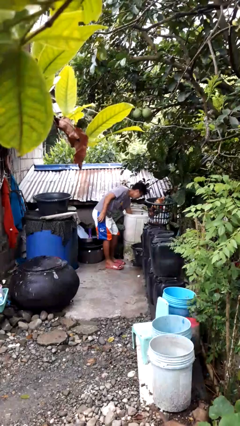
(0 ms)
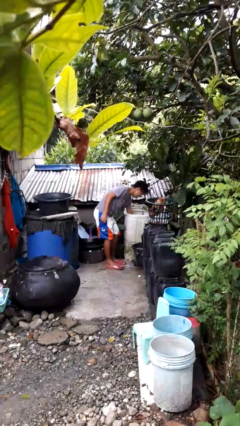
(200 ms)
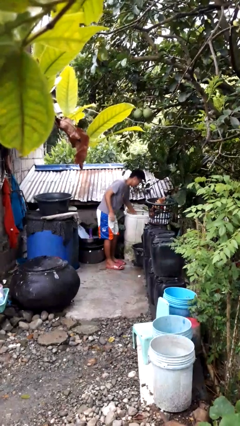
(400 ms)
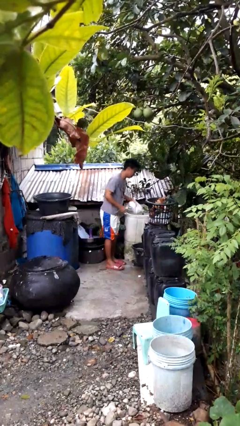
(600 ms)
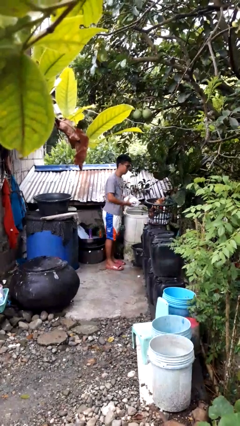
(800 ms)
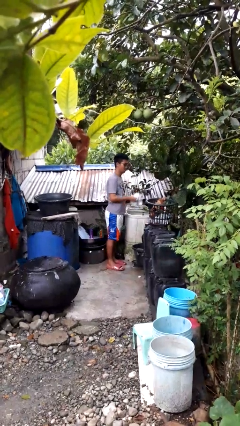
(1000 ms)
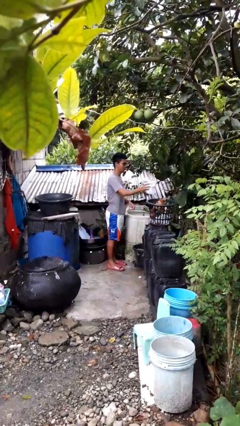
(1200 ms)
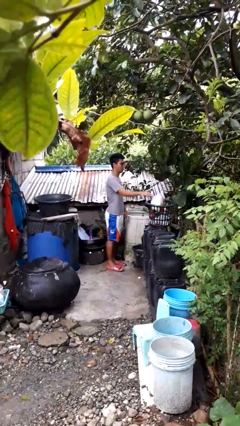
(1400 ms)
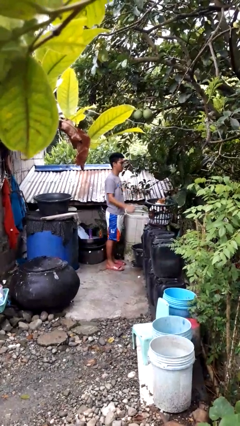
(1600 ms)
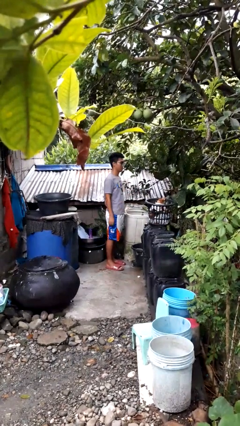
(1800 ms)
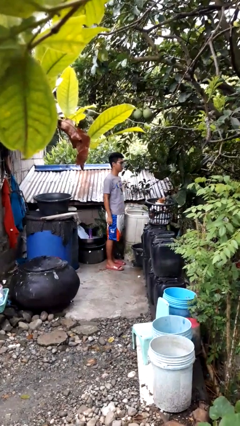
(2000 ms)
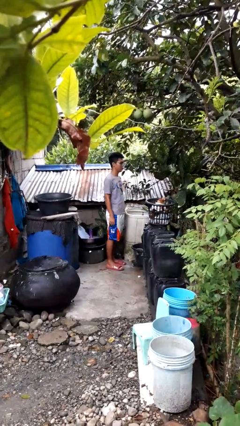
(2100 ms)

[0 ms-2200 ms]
person loads clotheswasher

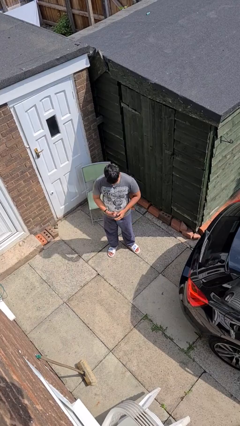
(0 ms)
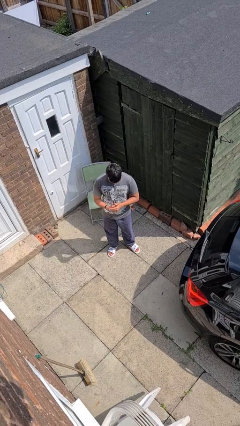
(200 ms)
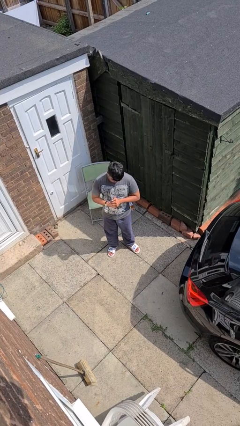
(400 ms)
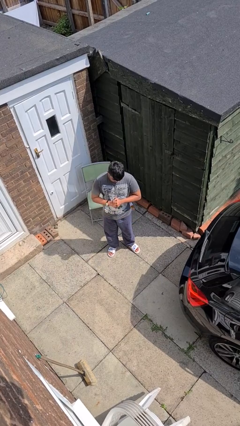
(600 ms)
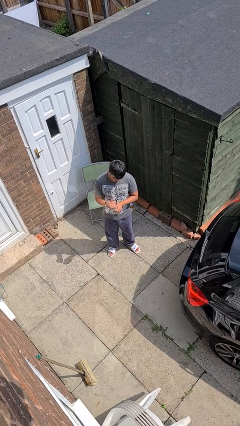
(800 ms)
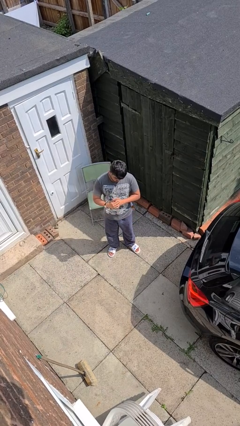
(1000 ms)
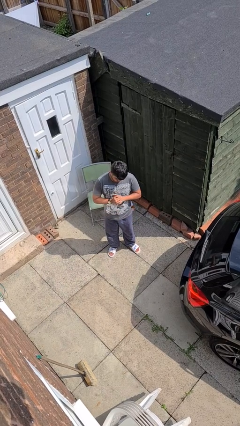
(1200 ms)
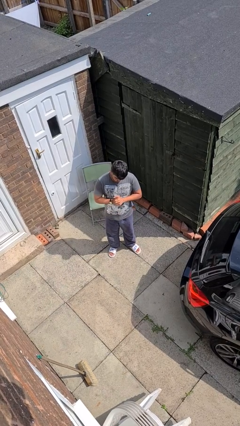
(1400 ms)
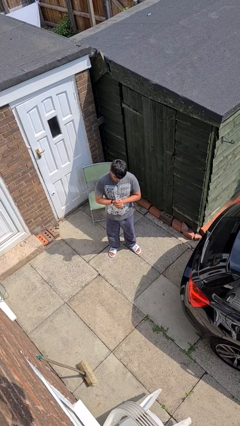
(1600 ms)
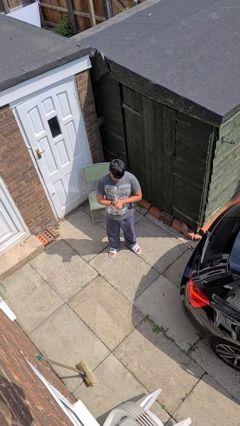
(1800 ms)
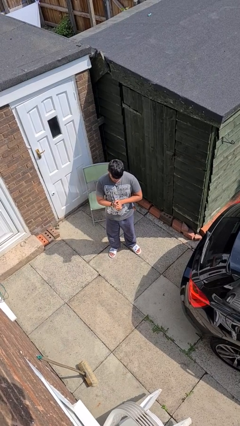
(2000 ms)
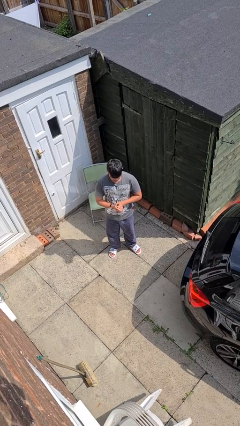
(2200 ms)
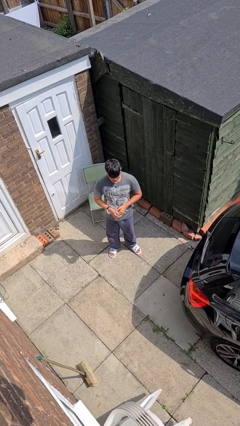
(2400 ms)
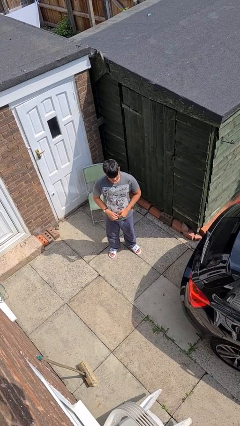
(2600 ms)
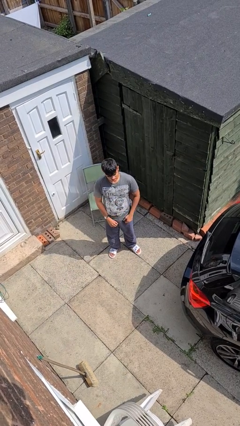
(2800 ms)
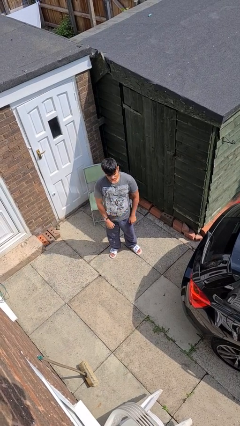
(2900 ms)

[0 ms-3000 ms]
person cracks knuckles

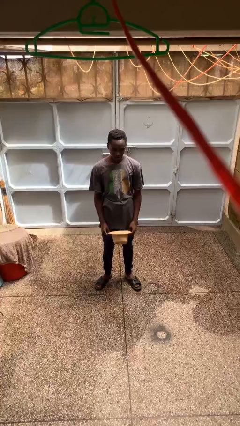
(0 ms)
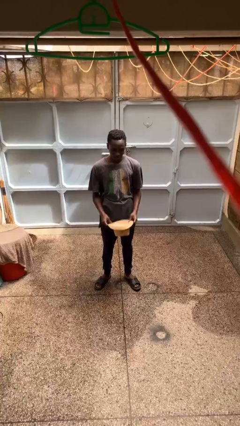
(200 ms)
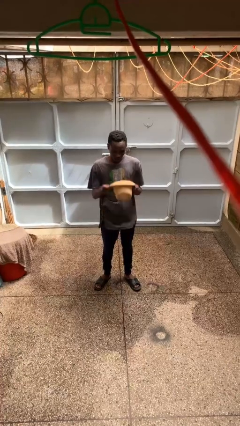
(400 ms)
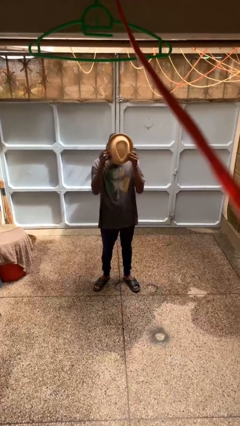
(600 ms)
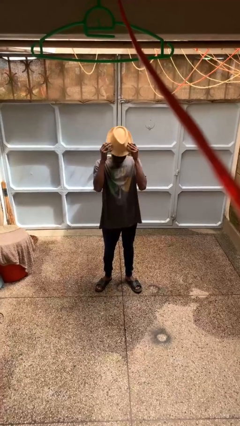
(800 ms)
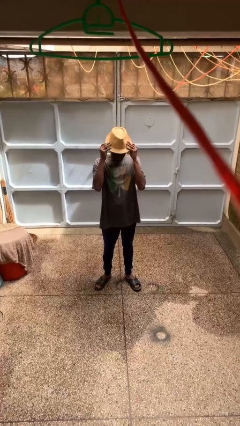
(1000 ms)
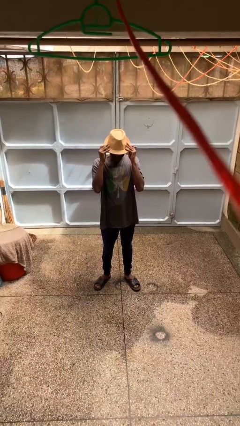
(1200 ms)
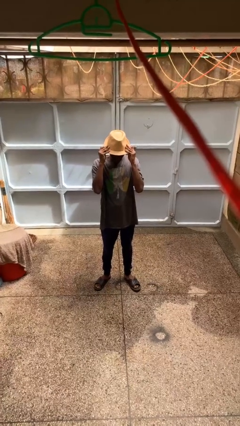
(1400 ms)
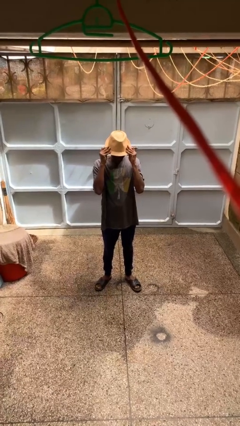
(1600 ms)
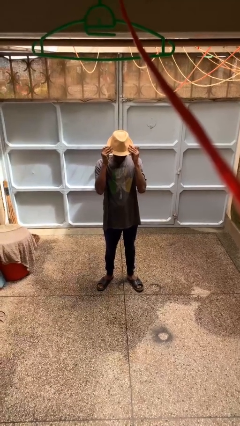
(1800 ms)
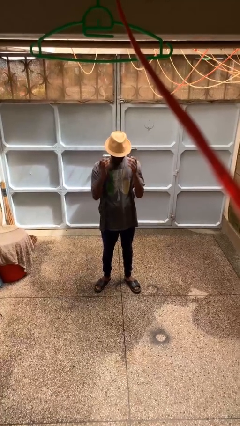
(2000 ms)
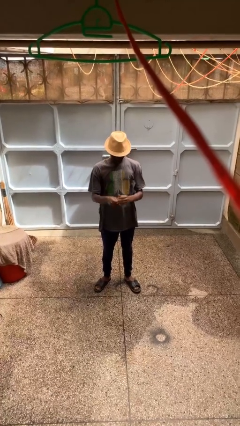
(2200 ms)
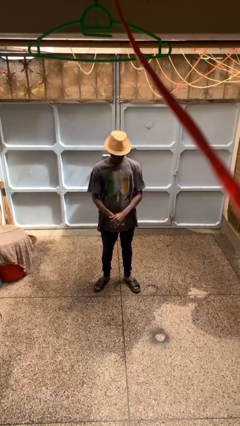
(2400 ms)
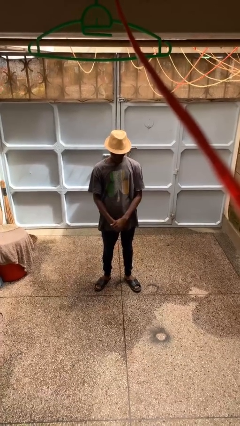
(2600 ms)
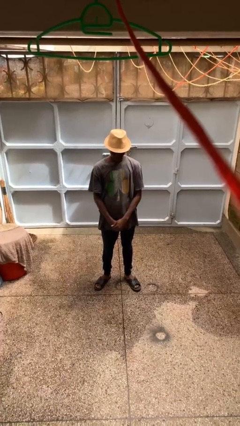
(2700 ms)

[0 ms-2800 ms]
person puts on hat

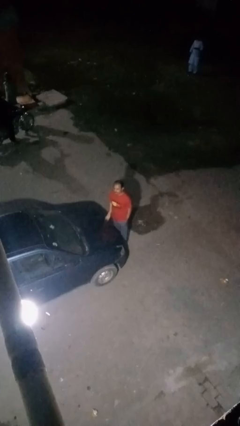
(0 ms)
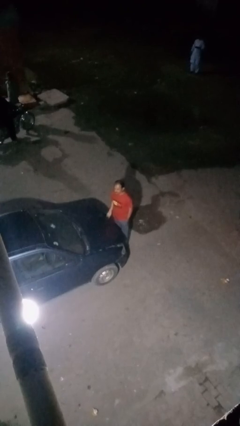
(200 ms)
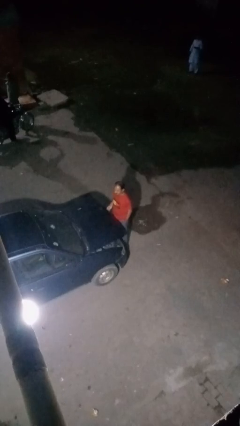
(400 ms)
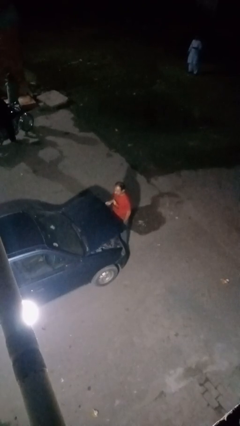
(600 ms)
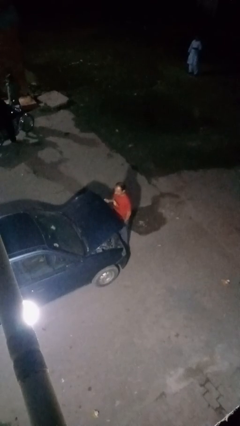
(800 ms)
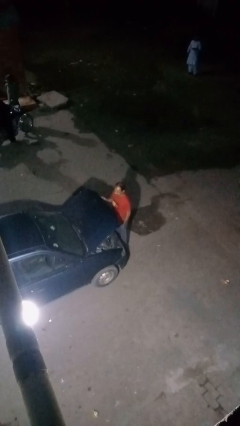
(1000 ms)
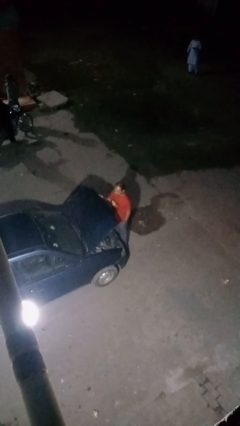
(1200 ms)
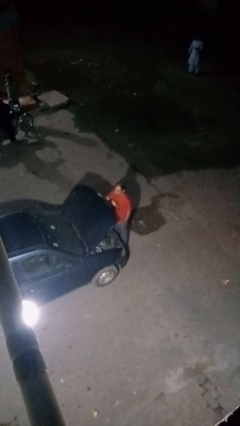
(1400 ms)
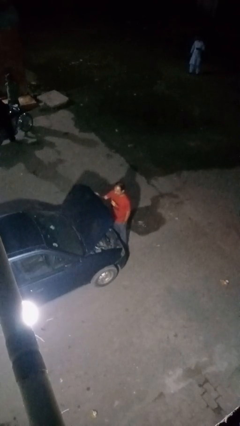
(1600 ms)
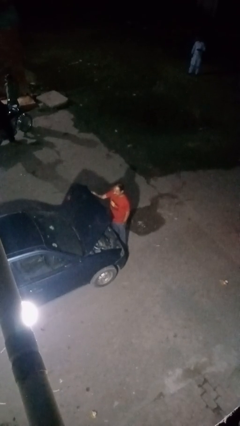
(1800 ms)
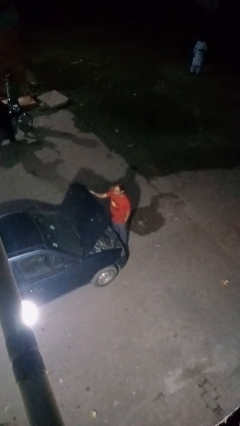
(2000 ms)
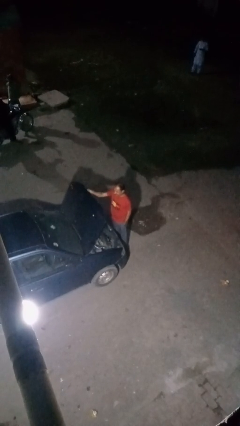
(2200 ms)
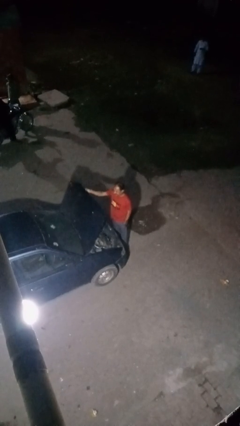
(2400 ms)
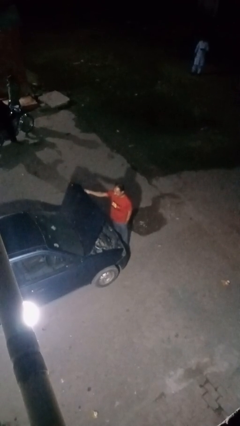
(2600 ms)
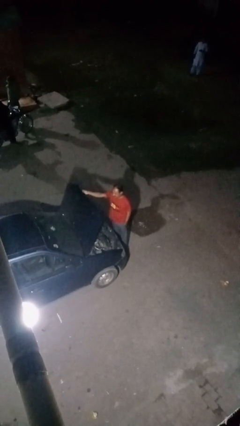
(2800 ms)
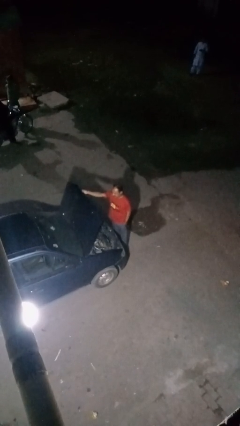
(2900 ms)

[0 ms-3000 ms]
person opens car hood

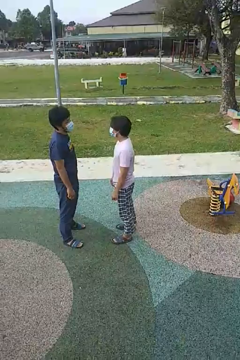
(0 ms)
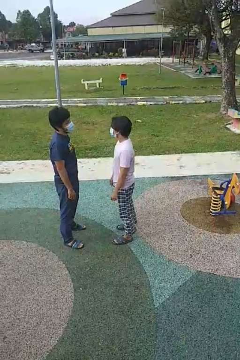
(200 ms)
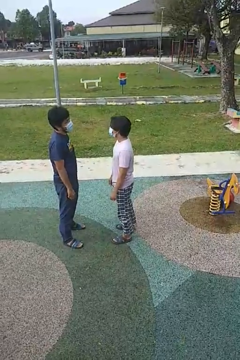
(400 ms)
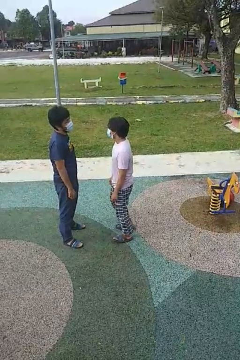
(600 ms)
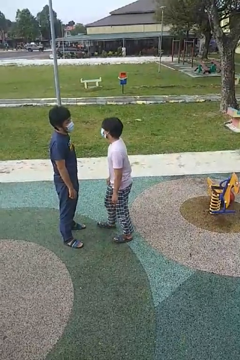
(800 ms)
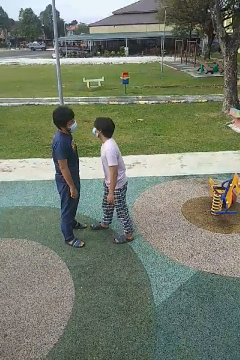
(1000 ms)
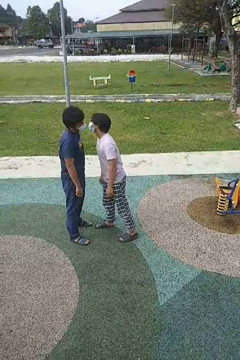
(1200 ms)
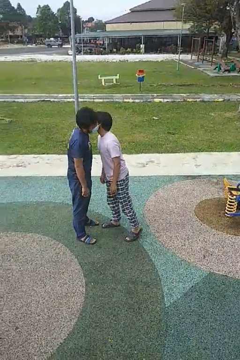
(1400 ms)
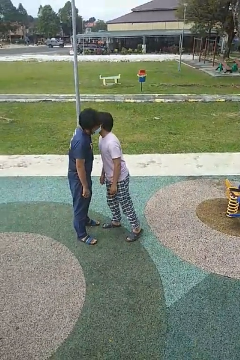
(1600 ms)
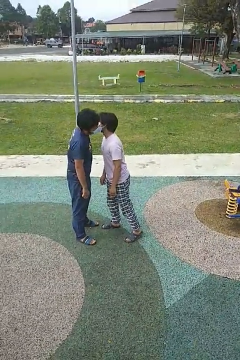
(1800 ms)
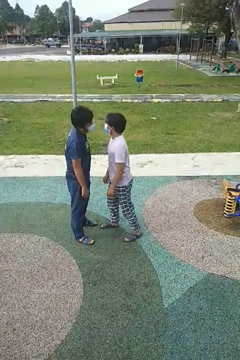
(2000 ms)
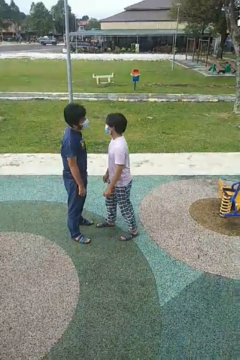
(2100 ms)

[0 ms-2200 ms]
person kisses cheek of person

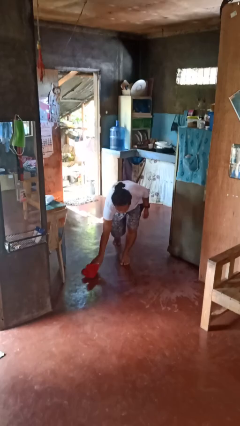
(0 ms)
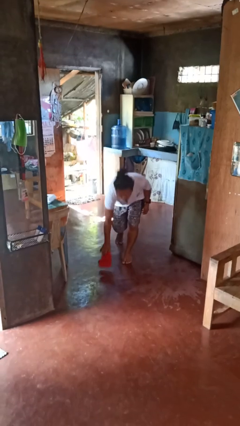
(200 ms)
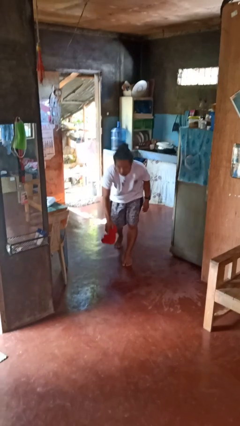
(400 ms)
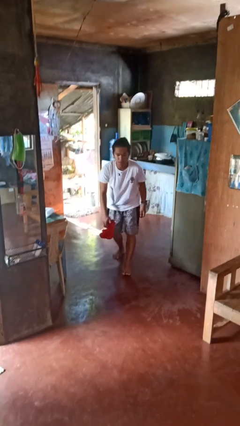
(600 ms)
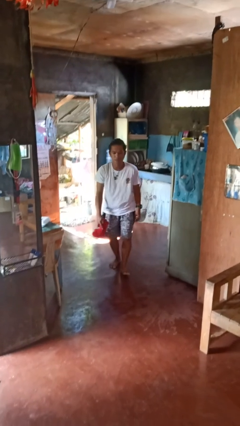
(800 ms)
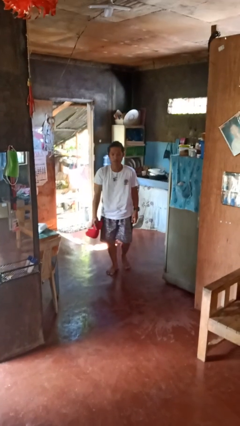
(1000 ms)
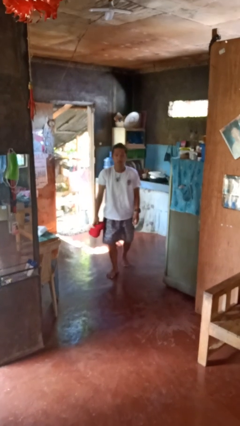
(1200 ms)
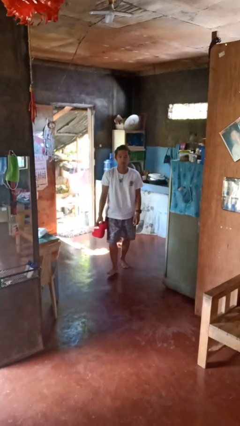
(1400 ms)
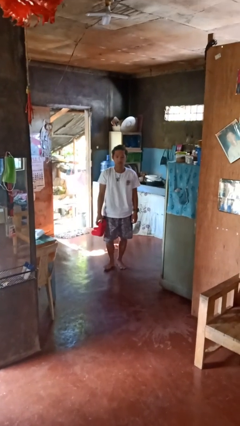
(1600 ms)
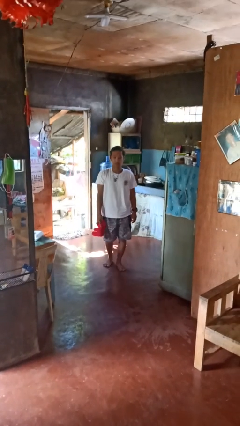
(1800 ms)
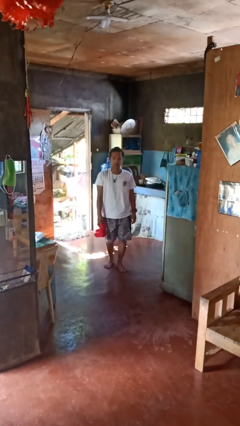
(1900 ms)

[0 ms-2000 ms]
person picks up object from floor

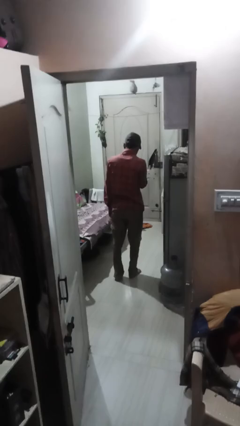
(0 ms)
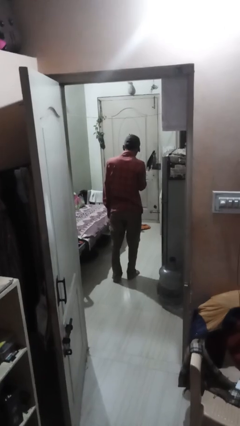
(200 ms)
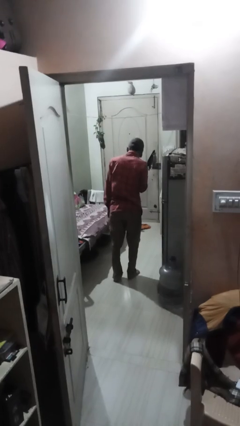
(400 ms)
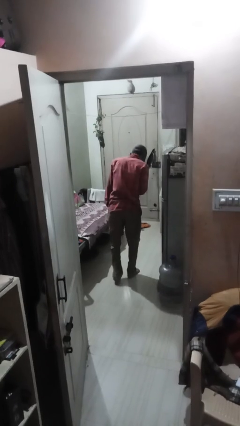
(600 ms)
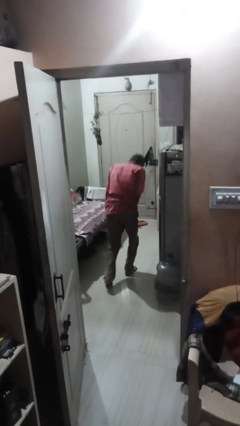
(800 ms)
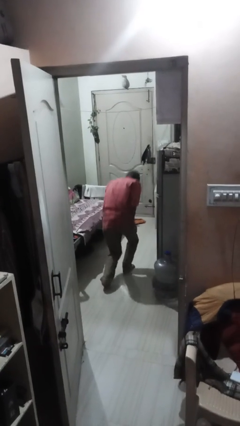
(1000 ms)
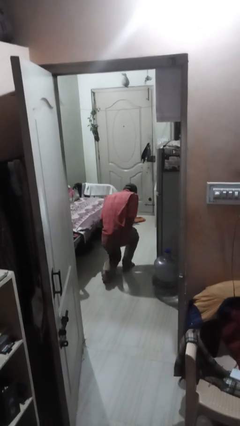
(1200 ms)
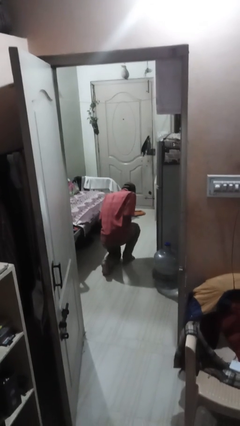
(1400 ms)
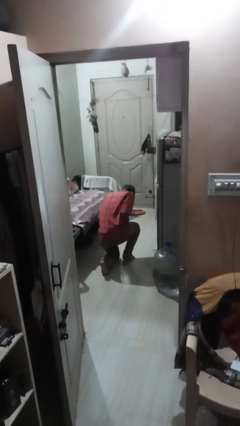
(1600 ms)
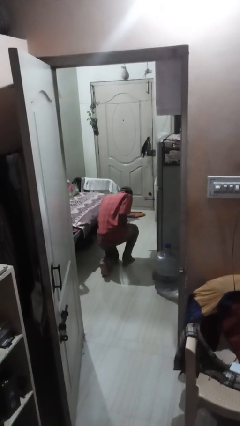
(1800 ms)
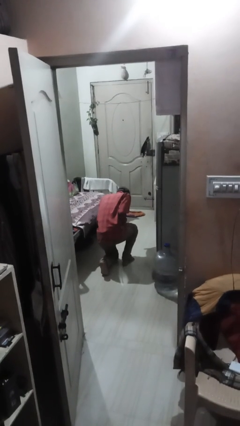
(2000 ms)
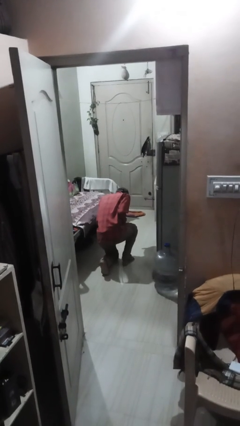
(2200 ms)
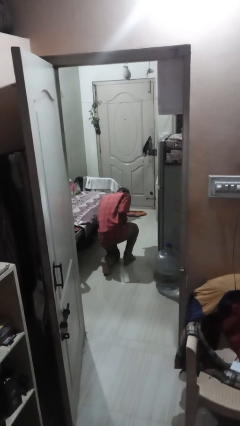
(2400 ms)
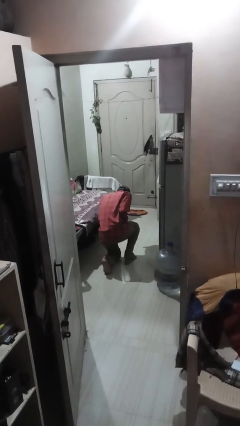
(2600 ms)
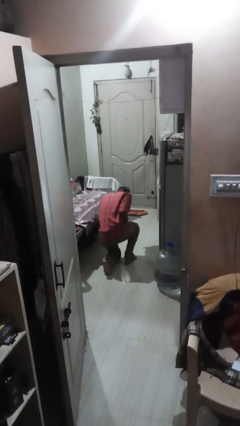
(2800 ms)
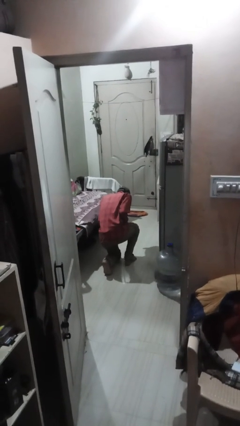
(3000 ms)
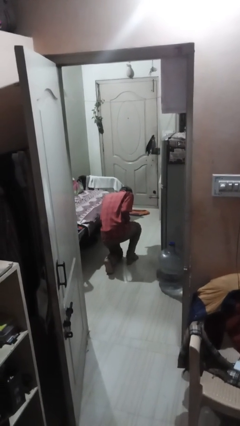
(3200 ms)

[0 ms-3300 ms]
person kneels
